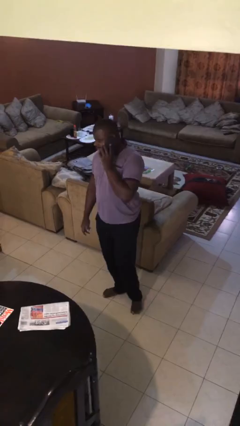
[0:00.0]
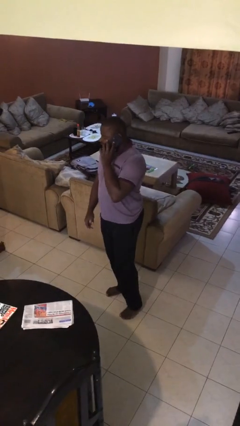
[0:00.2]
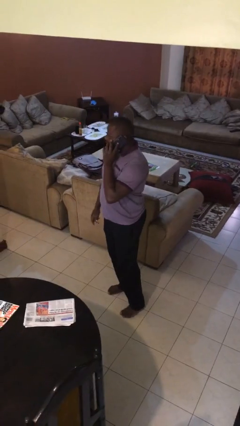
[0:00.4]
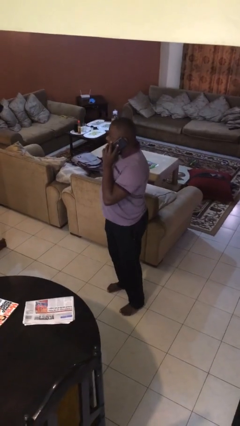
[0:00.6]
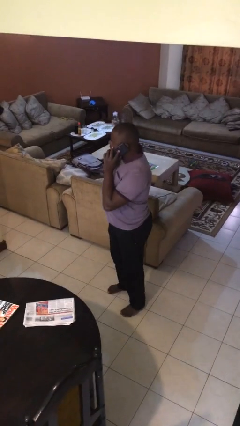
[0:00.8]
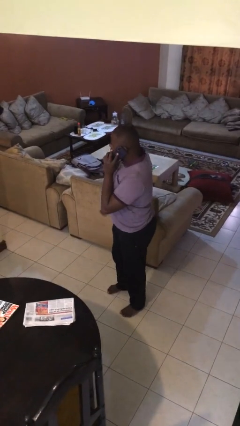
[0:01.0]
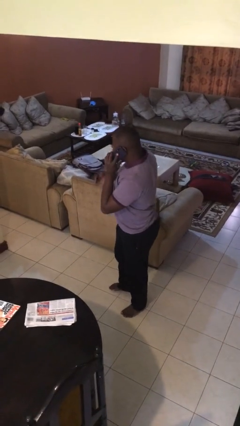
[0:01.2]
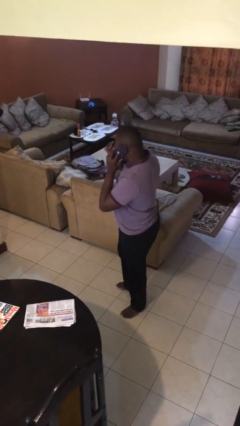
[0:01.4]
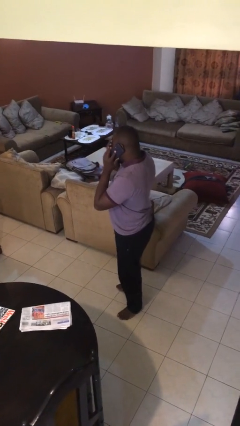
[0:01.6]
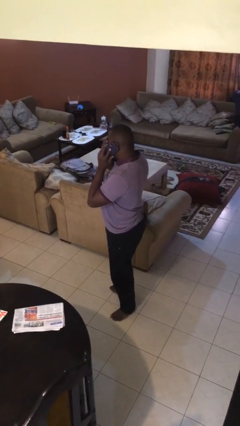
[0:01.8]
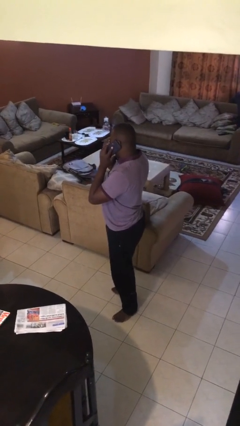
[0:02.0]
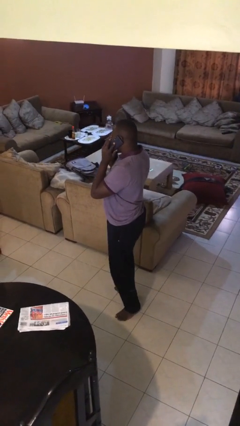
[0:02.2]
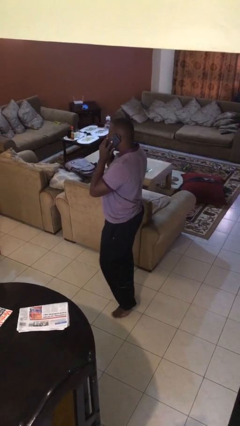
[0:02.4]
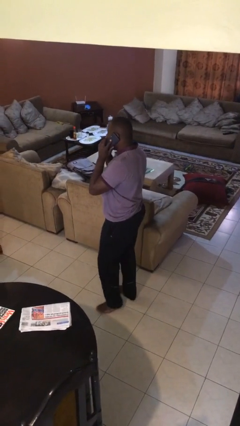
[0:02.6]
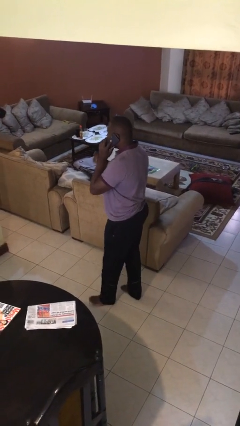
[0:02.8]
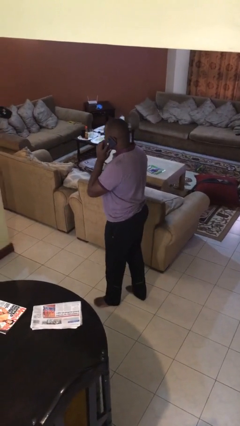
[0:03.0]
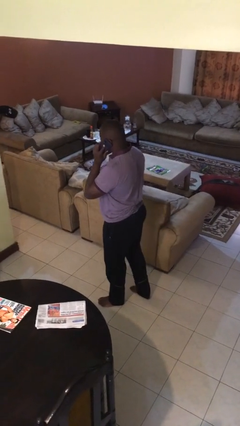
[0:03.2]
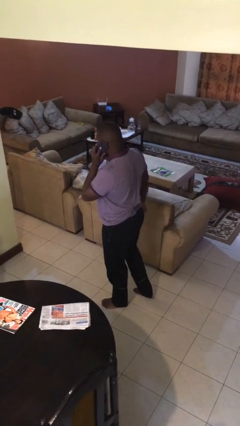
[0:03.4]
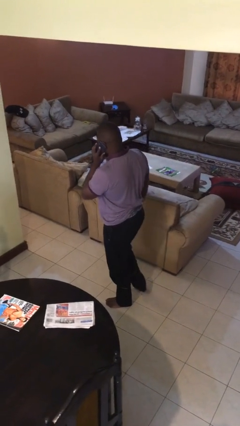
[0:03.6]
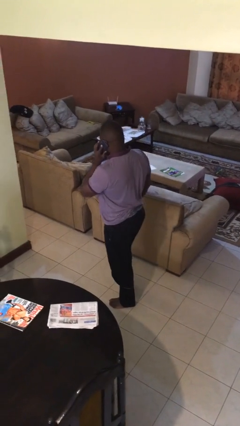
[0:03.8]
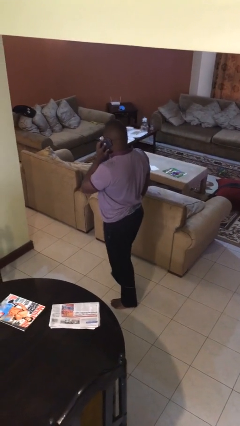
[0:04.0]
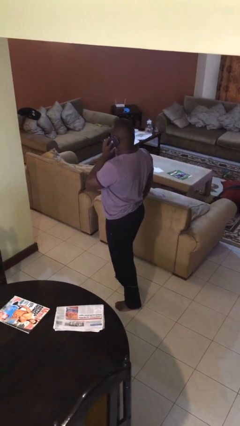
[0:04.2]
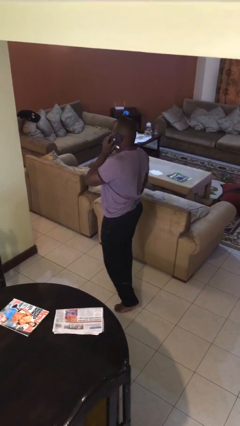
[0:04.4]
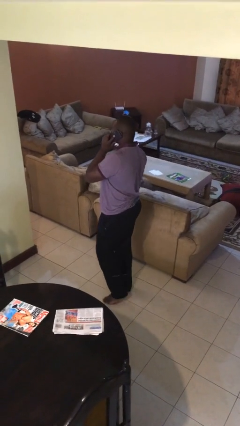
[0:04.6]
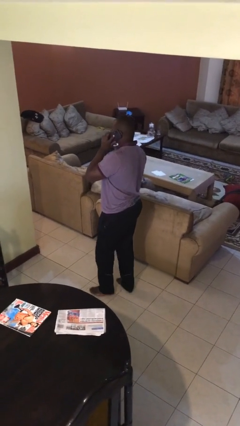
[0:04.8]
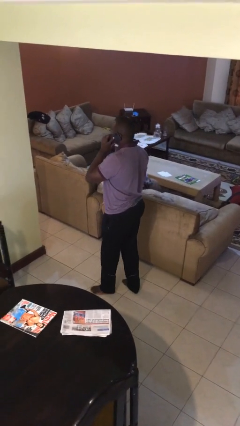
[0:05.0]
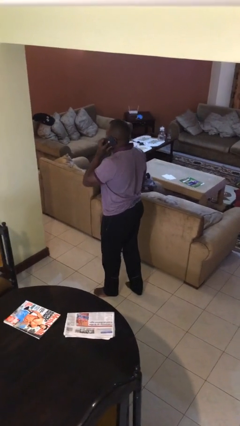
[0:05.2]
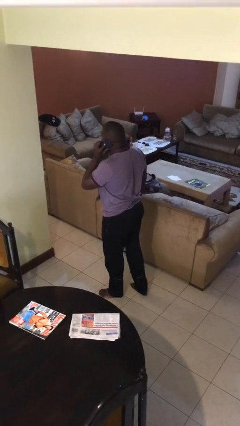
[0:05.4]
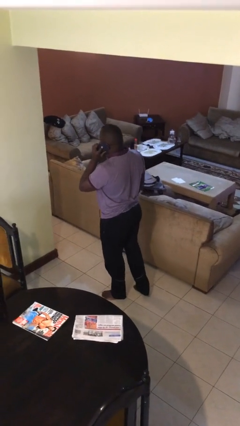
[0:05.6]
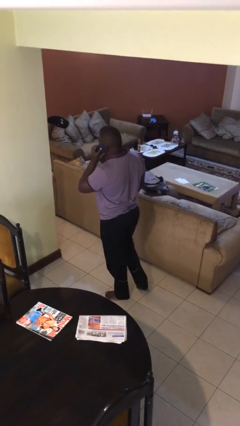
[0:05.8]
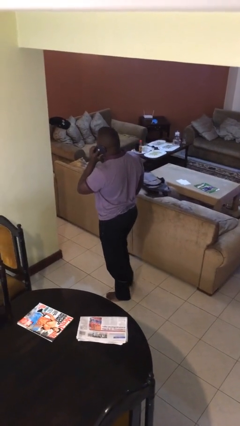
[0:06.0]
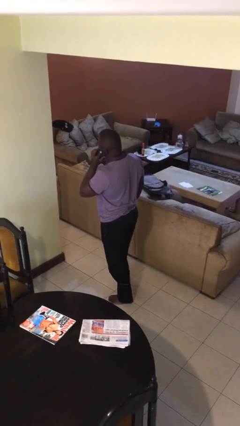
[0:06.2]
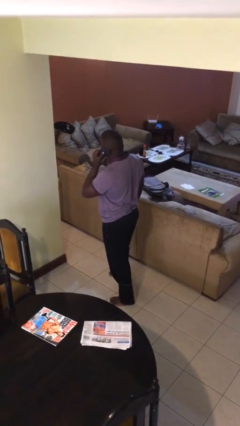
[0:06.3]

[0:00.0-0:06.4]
person talks on phone

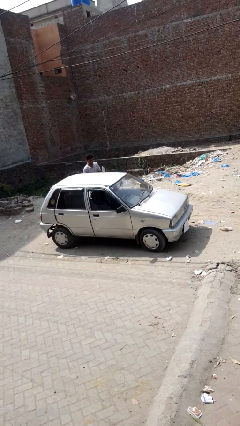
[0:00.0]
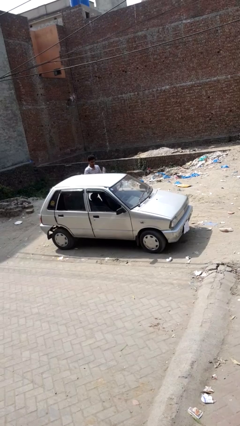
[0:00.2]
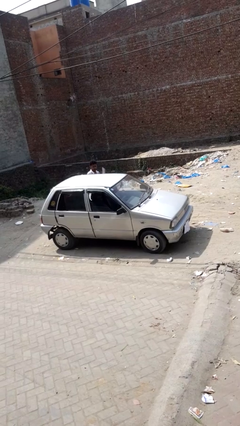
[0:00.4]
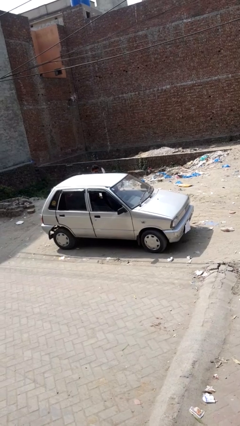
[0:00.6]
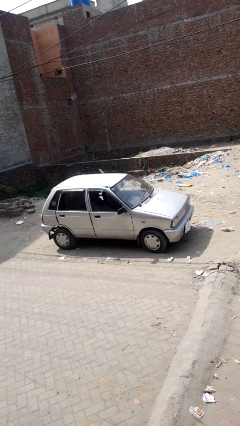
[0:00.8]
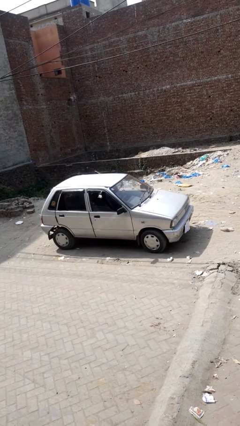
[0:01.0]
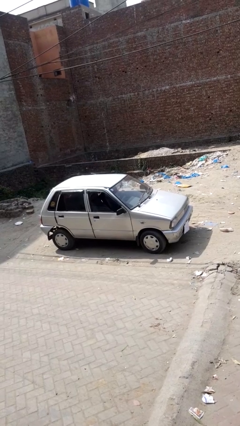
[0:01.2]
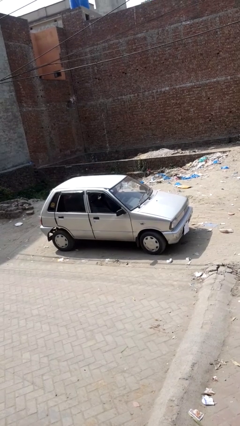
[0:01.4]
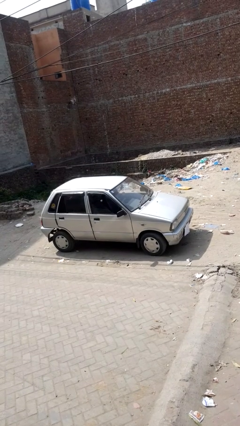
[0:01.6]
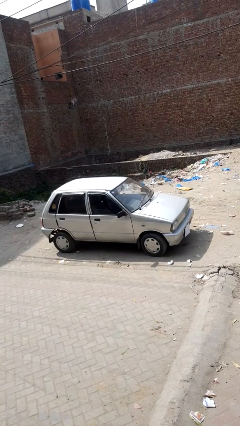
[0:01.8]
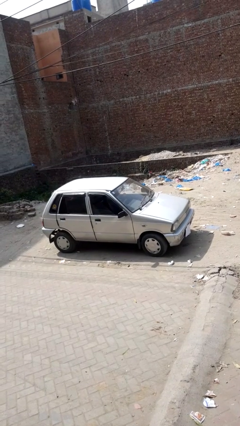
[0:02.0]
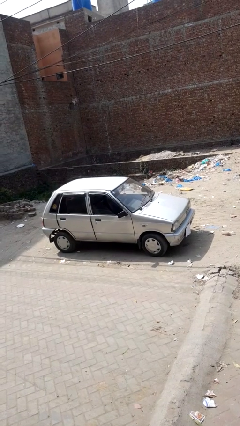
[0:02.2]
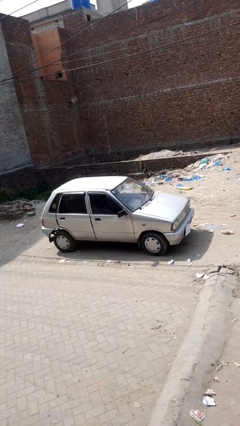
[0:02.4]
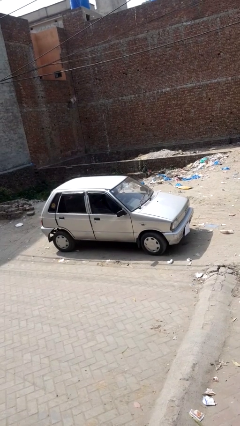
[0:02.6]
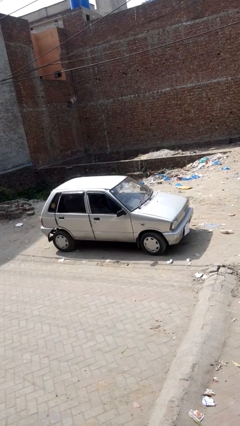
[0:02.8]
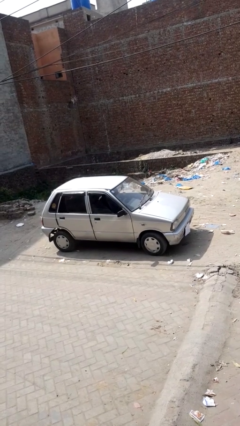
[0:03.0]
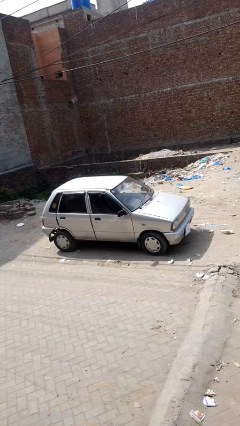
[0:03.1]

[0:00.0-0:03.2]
car picks up person

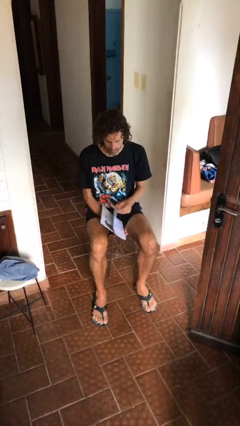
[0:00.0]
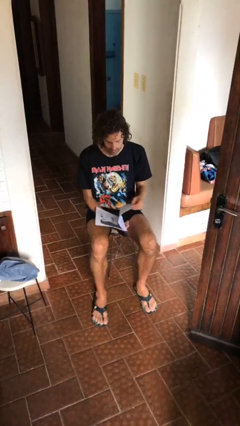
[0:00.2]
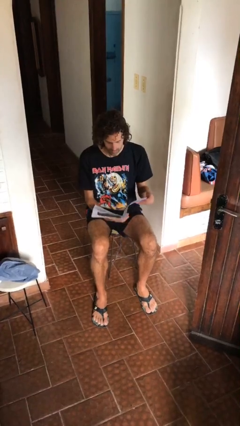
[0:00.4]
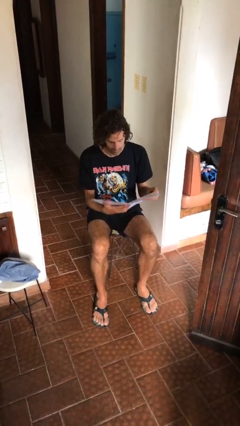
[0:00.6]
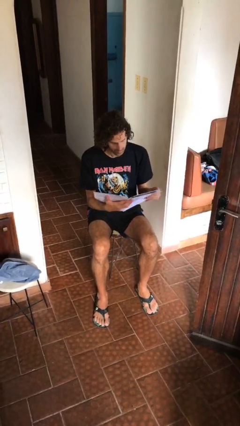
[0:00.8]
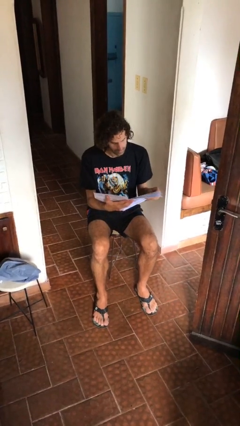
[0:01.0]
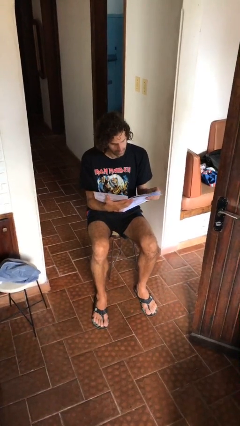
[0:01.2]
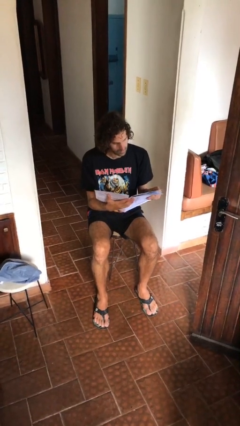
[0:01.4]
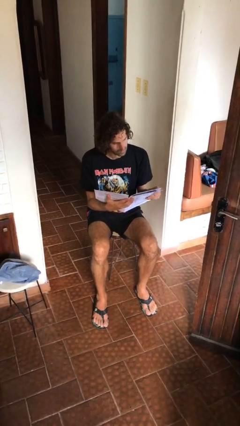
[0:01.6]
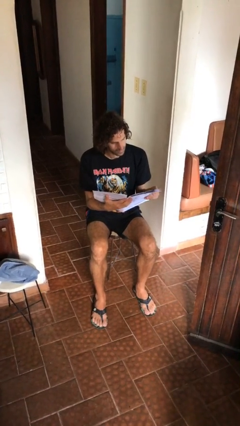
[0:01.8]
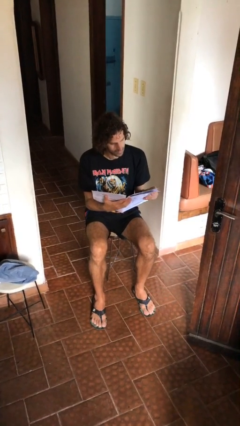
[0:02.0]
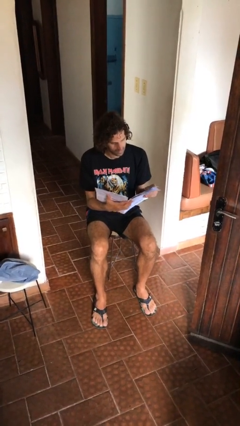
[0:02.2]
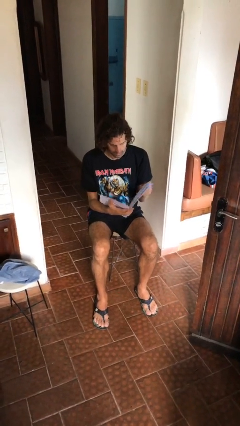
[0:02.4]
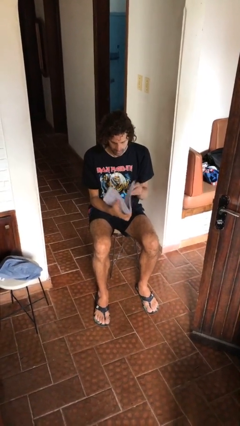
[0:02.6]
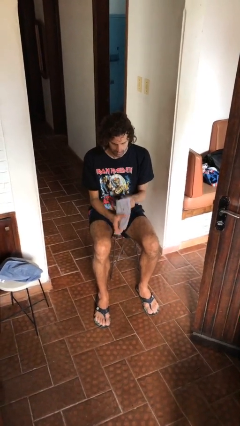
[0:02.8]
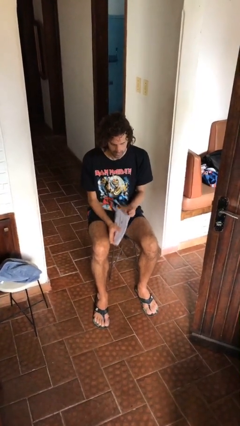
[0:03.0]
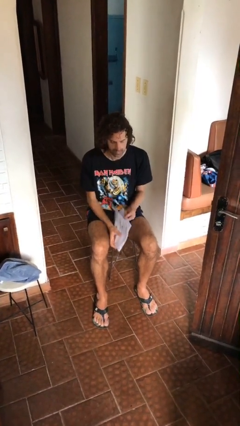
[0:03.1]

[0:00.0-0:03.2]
person reads document

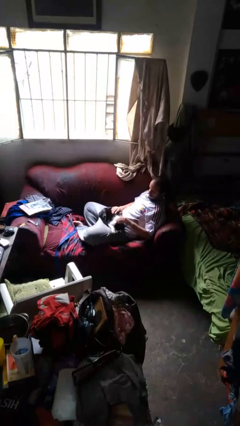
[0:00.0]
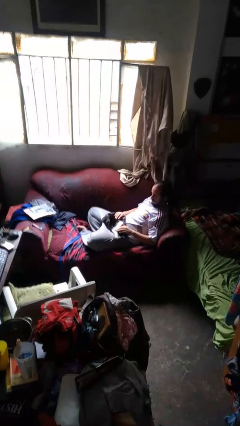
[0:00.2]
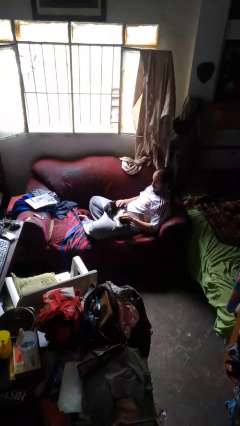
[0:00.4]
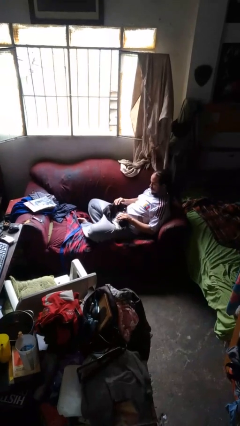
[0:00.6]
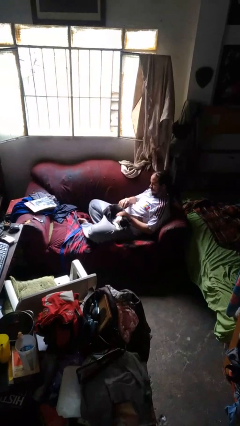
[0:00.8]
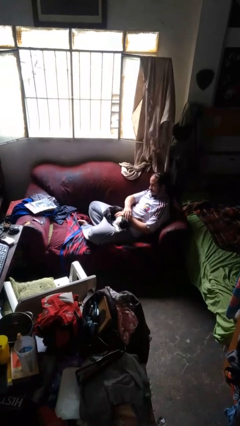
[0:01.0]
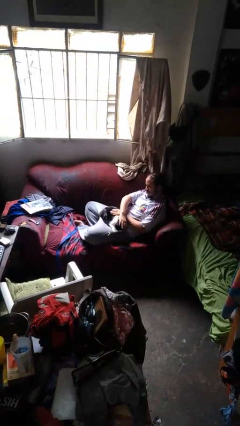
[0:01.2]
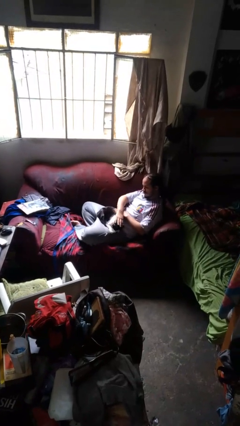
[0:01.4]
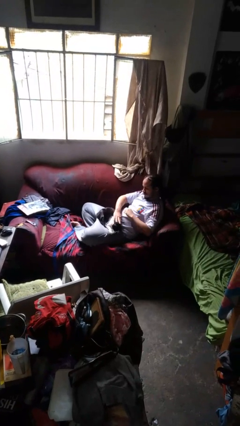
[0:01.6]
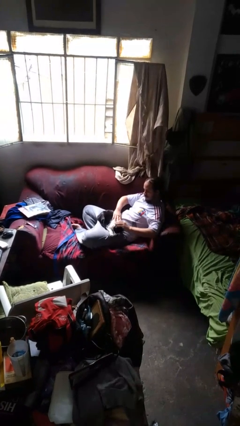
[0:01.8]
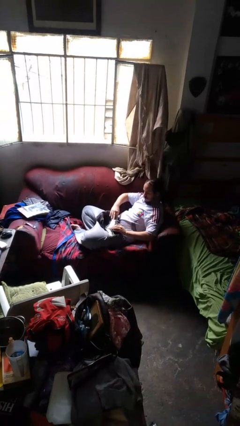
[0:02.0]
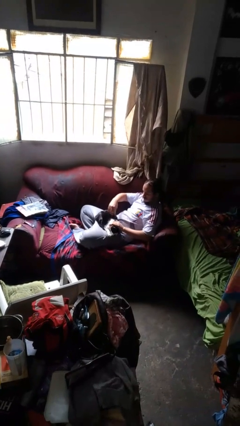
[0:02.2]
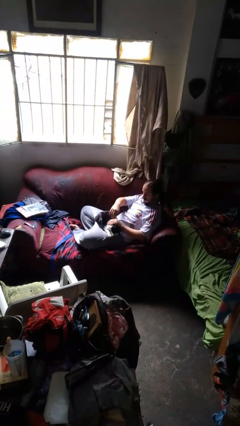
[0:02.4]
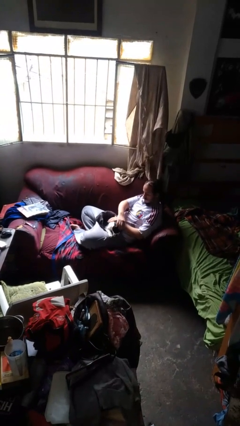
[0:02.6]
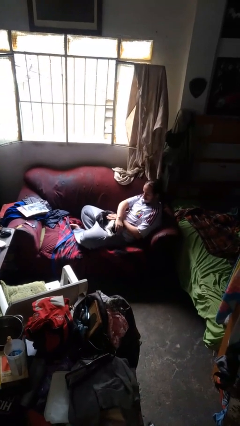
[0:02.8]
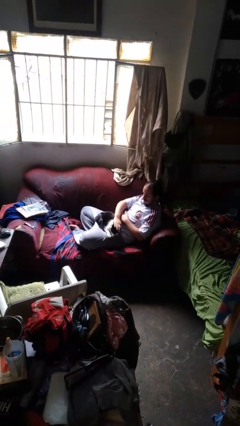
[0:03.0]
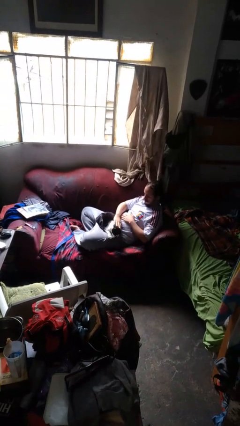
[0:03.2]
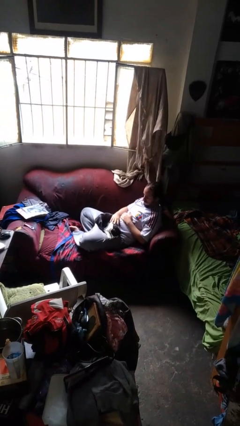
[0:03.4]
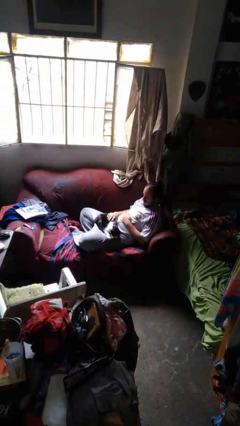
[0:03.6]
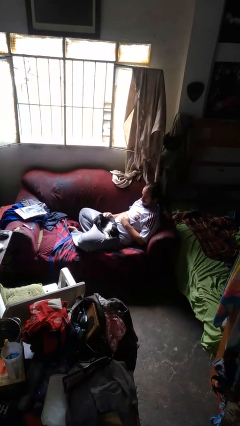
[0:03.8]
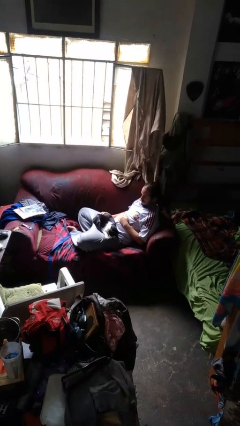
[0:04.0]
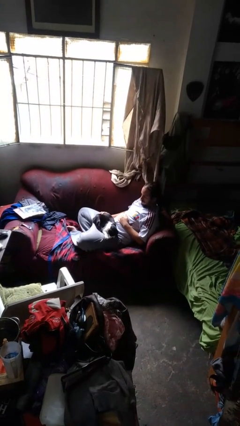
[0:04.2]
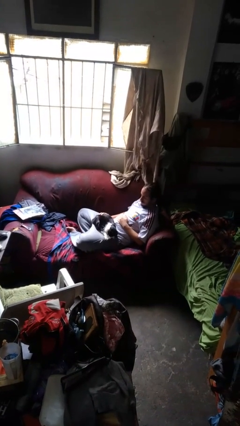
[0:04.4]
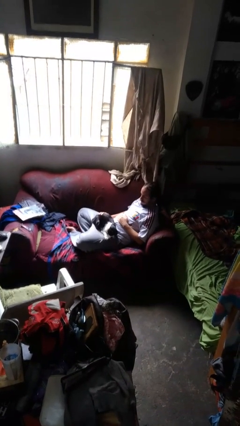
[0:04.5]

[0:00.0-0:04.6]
person pets cat
